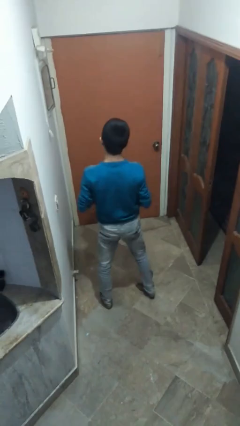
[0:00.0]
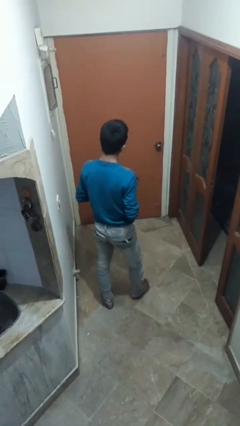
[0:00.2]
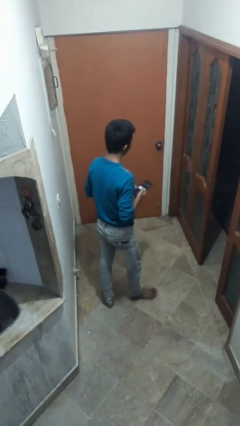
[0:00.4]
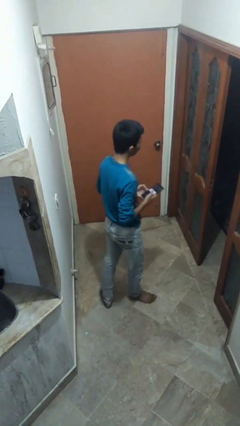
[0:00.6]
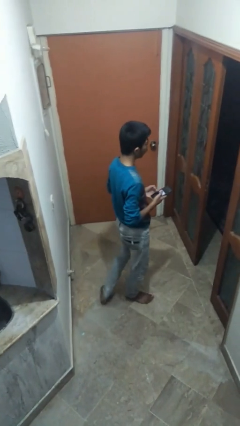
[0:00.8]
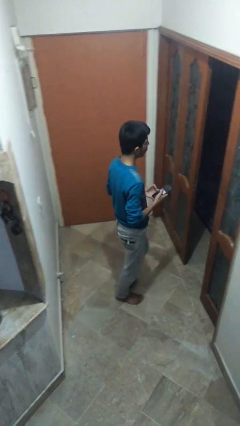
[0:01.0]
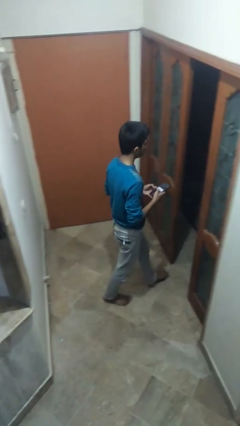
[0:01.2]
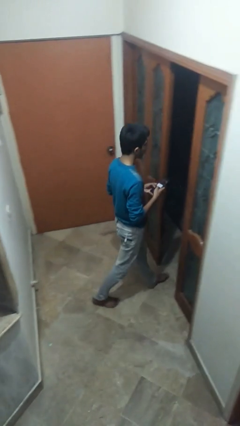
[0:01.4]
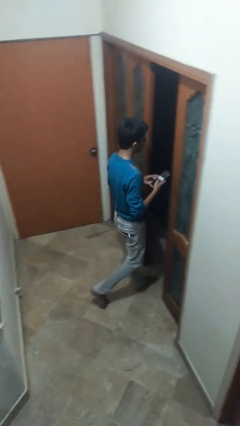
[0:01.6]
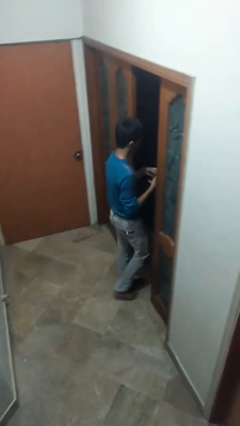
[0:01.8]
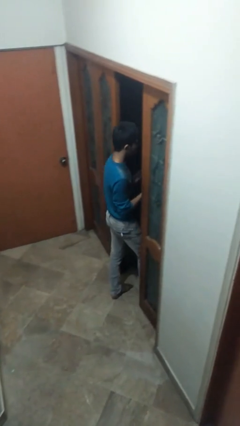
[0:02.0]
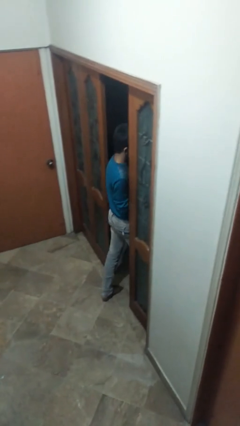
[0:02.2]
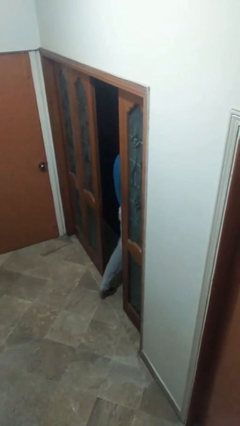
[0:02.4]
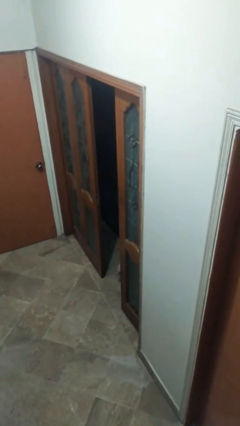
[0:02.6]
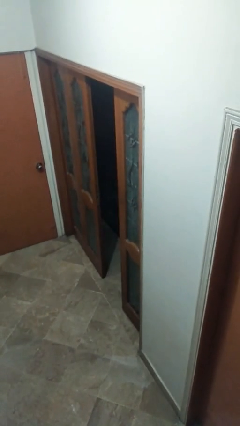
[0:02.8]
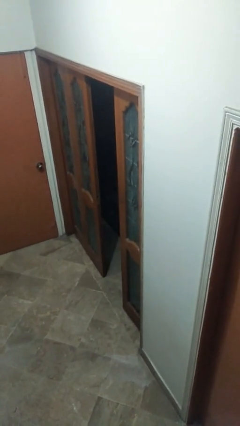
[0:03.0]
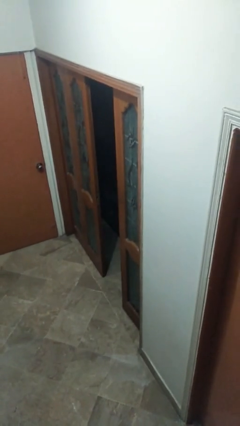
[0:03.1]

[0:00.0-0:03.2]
person exits scene through structure

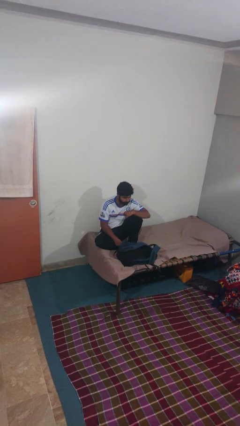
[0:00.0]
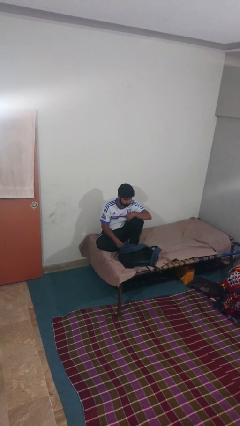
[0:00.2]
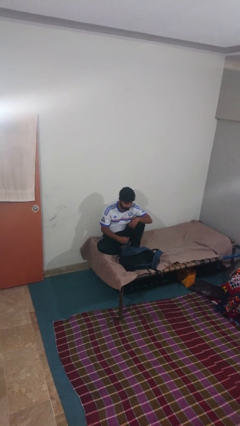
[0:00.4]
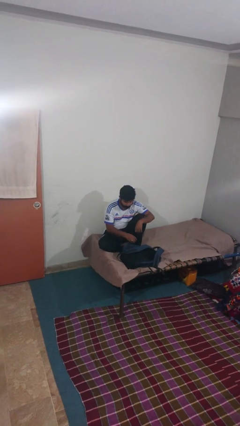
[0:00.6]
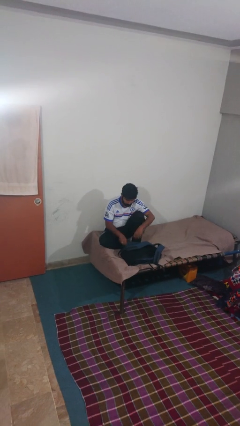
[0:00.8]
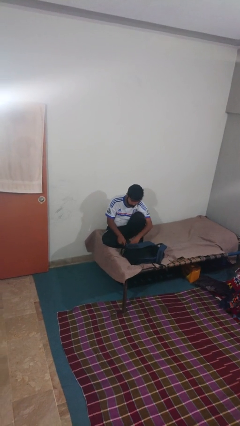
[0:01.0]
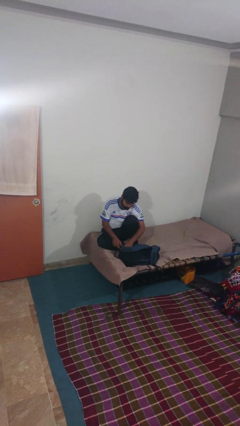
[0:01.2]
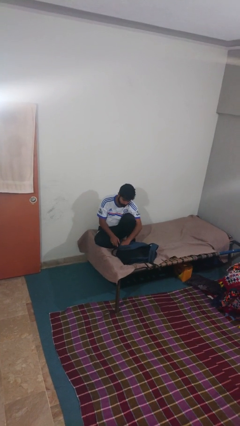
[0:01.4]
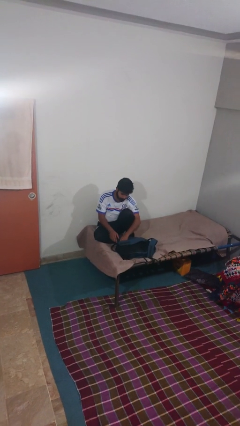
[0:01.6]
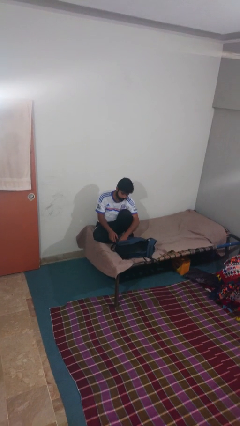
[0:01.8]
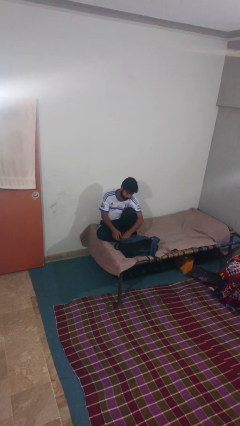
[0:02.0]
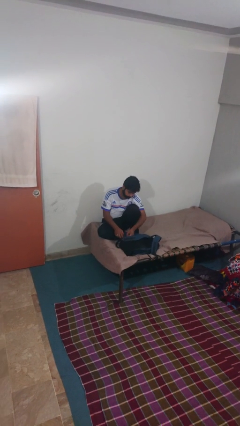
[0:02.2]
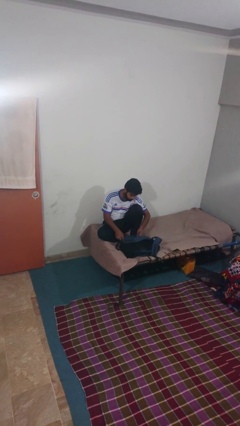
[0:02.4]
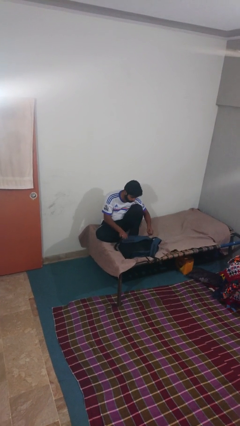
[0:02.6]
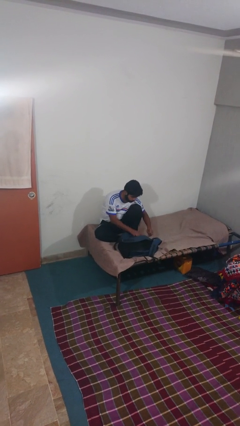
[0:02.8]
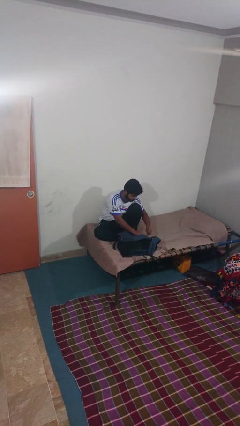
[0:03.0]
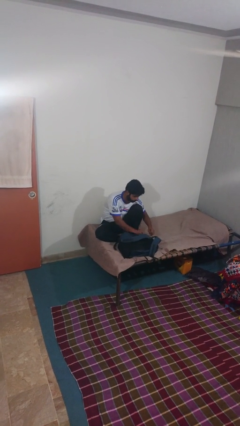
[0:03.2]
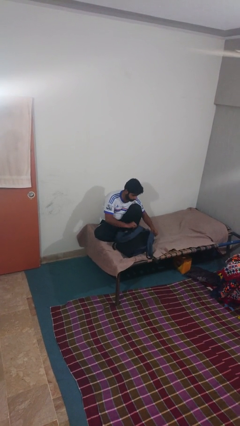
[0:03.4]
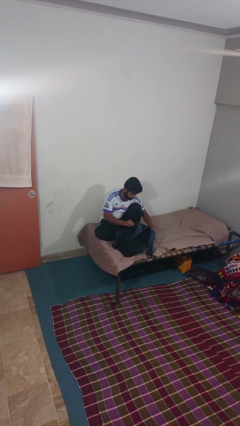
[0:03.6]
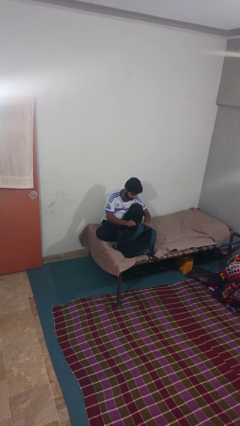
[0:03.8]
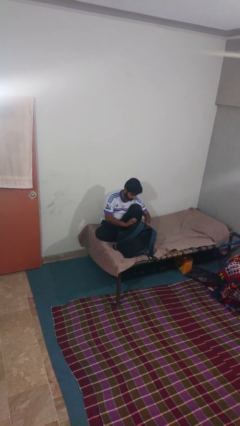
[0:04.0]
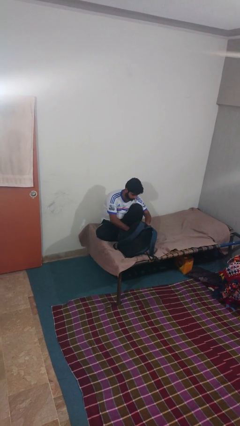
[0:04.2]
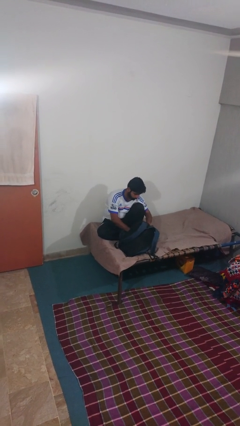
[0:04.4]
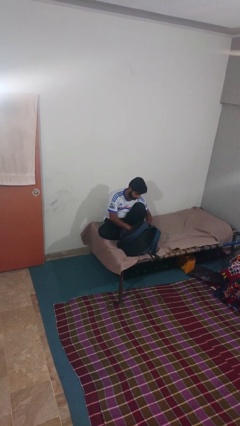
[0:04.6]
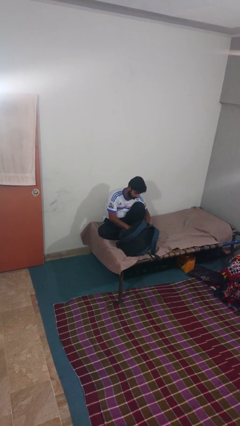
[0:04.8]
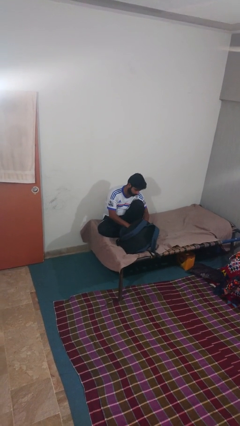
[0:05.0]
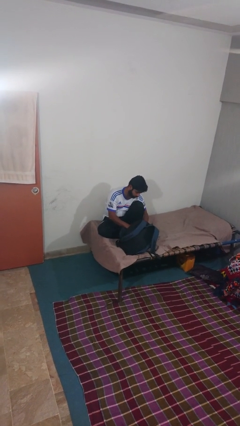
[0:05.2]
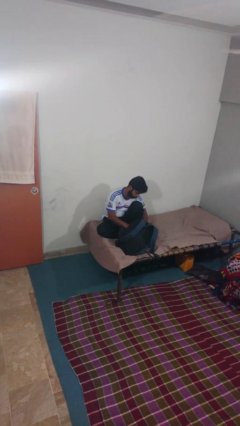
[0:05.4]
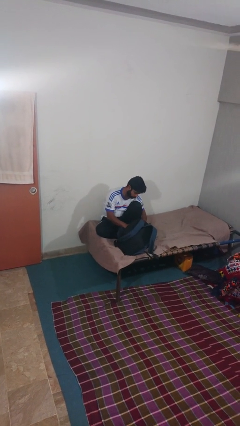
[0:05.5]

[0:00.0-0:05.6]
person searches in backpack

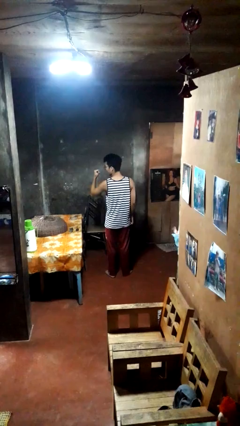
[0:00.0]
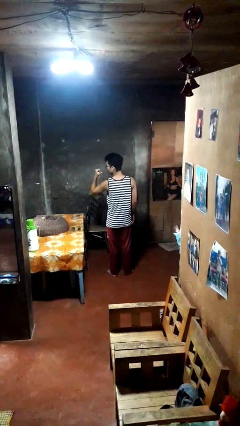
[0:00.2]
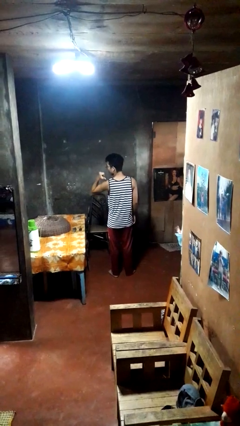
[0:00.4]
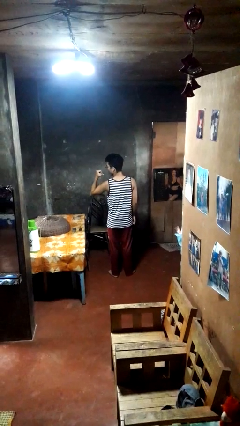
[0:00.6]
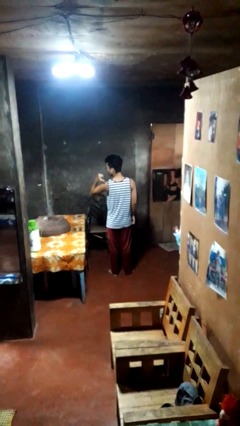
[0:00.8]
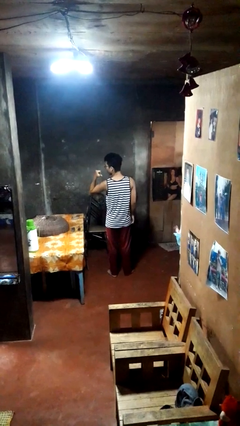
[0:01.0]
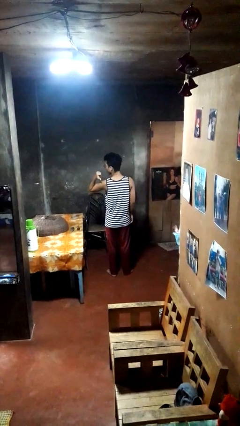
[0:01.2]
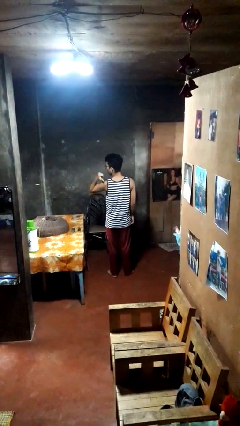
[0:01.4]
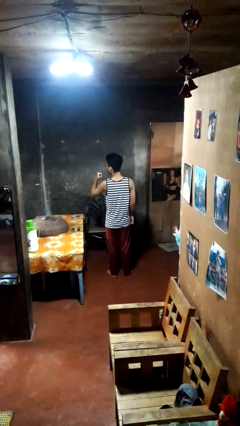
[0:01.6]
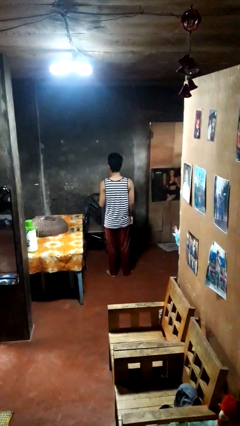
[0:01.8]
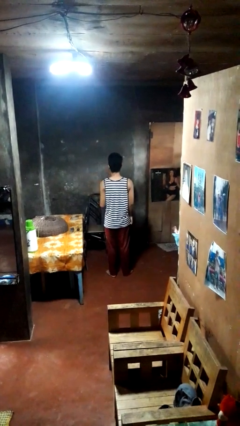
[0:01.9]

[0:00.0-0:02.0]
person gestures behind me

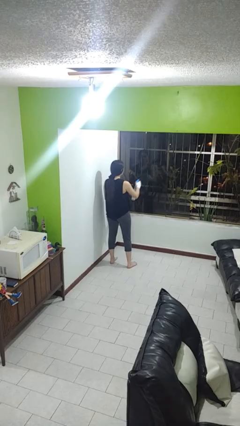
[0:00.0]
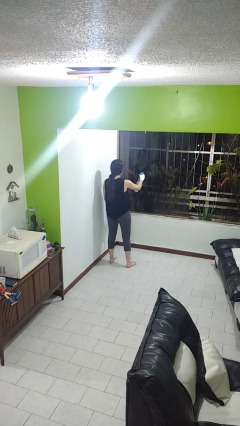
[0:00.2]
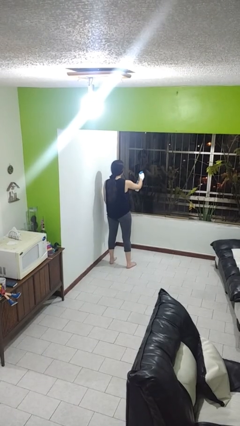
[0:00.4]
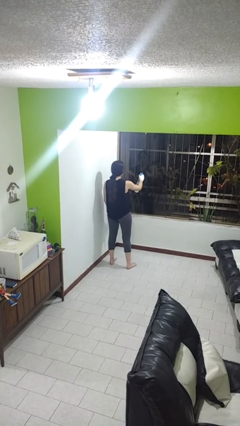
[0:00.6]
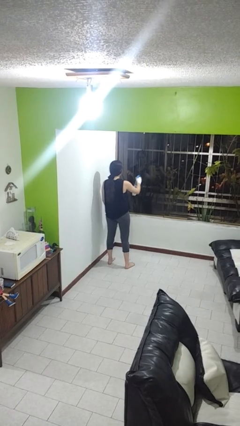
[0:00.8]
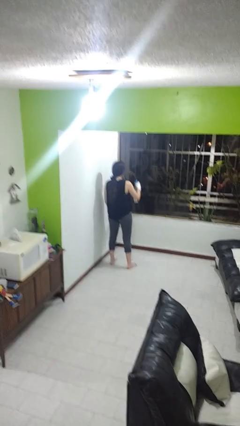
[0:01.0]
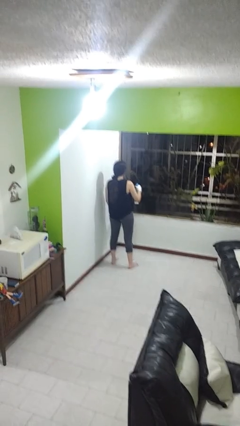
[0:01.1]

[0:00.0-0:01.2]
person sprays from bottle

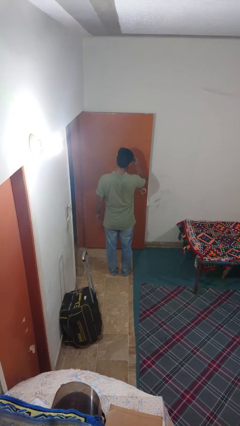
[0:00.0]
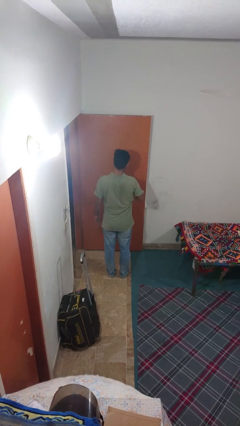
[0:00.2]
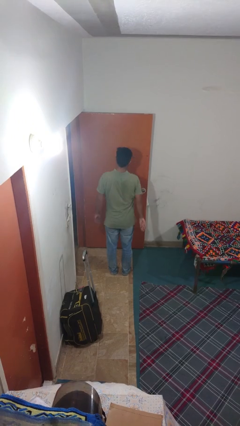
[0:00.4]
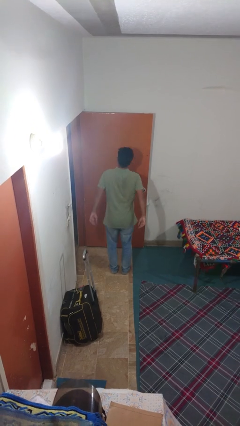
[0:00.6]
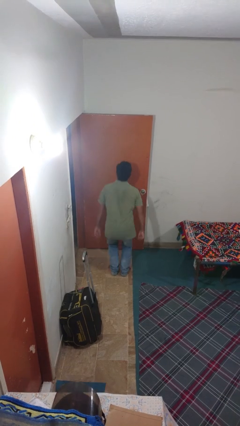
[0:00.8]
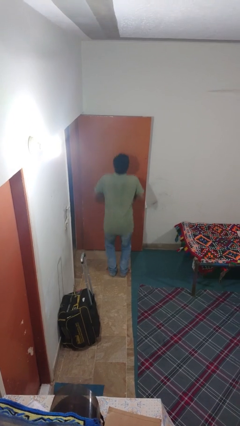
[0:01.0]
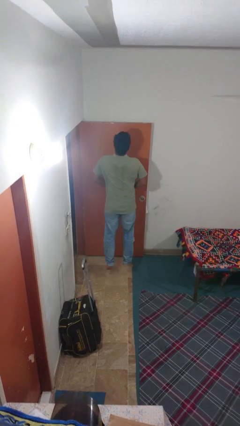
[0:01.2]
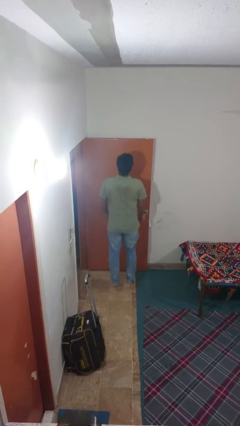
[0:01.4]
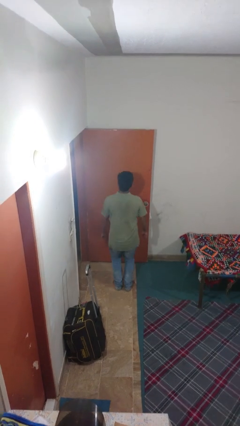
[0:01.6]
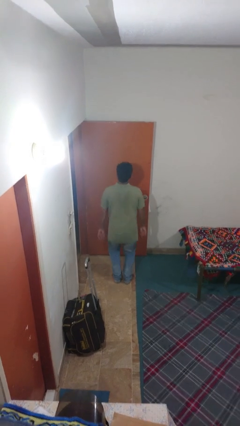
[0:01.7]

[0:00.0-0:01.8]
person jumps

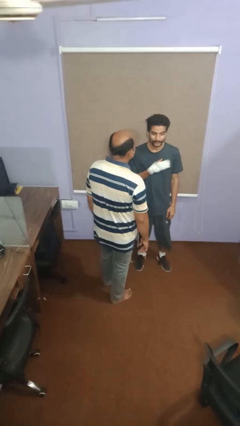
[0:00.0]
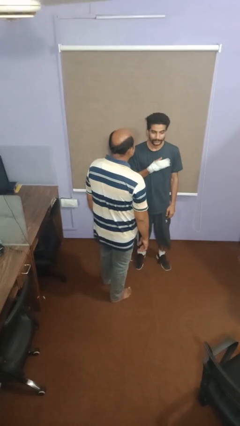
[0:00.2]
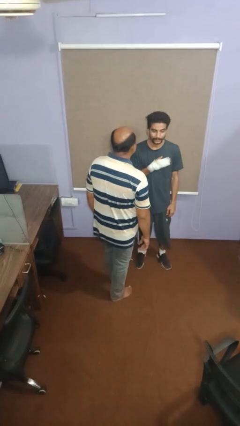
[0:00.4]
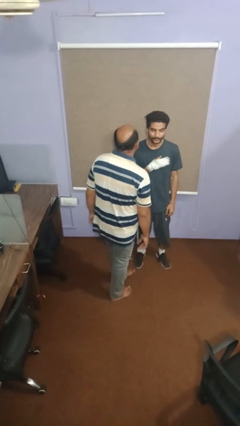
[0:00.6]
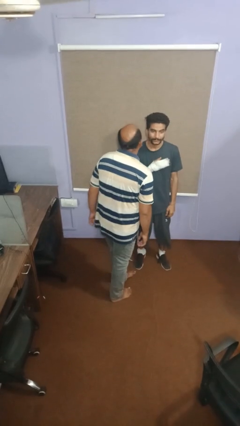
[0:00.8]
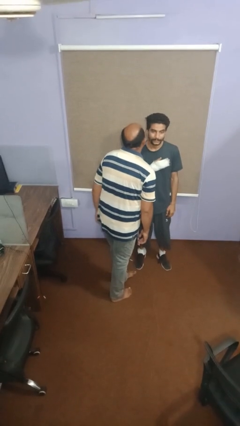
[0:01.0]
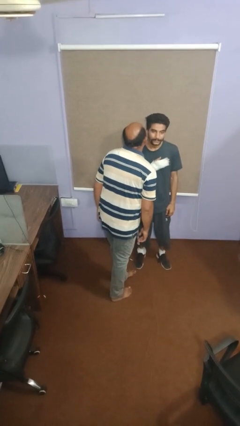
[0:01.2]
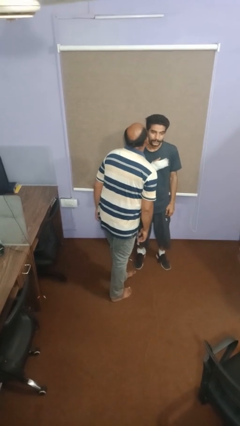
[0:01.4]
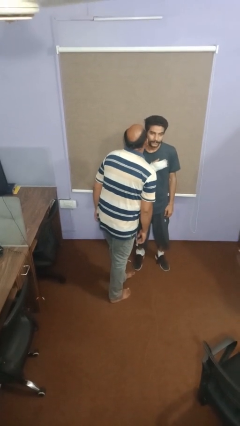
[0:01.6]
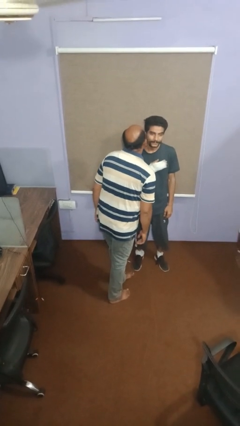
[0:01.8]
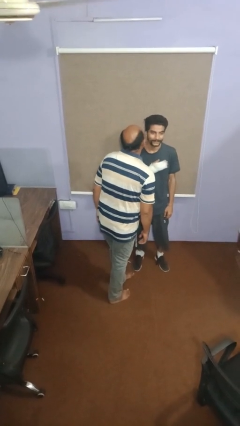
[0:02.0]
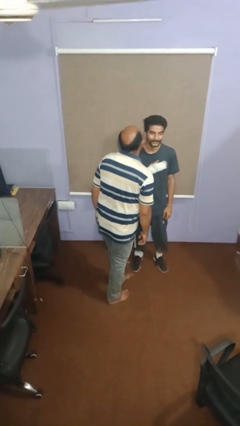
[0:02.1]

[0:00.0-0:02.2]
person kisses cheek of person

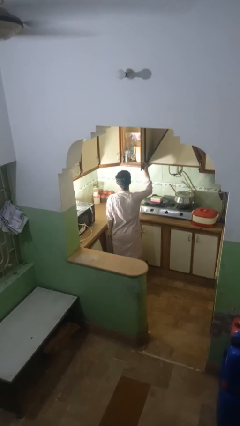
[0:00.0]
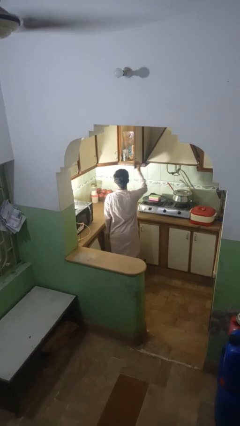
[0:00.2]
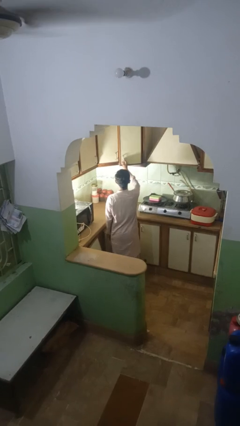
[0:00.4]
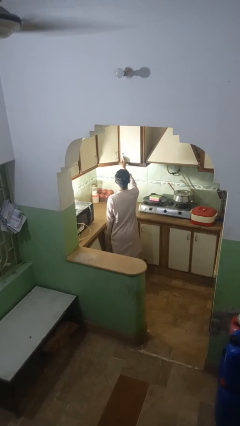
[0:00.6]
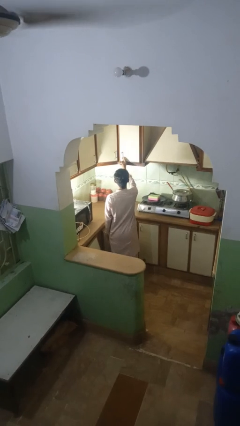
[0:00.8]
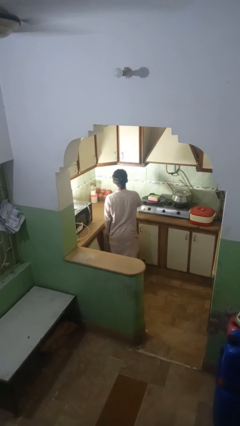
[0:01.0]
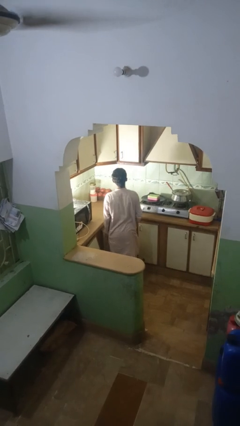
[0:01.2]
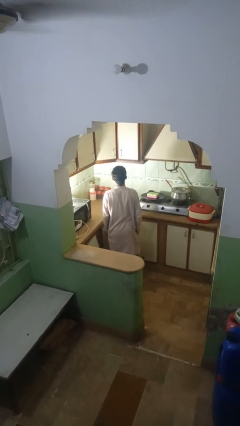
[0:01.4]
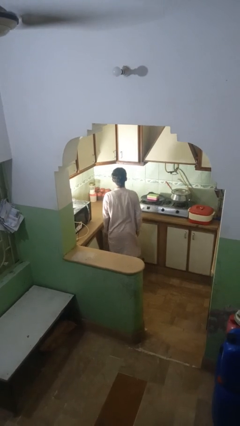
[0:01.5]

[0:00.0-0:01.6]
person closes kitchen drawer
